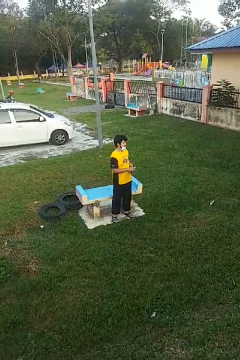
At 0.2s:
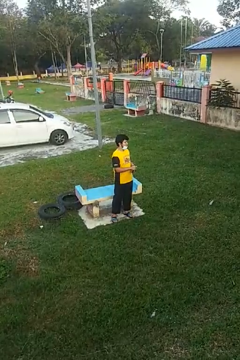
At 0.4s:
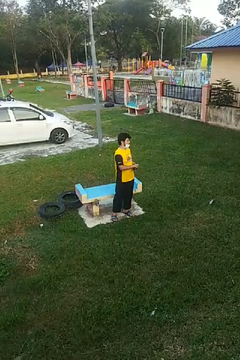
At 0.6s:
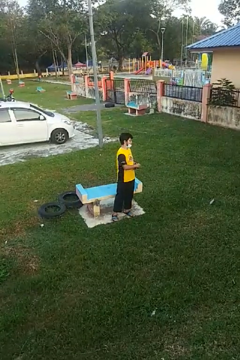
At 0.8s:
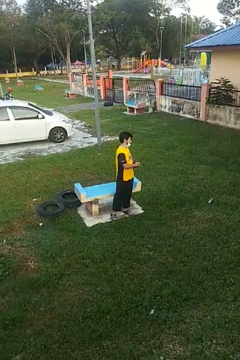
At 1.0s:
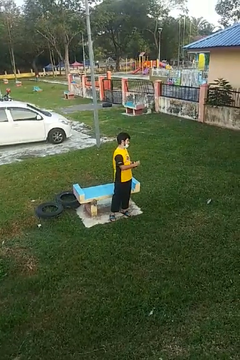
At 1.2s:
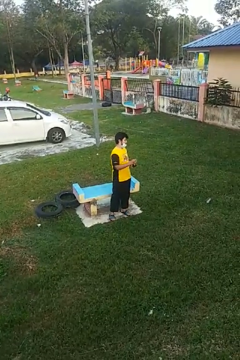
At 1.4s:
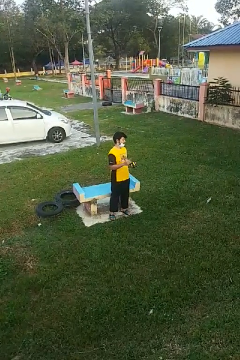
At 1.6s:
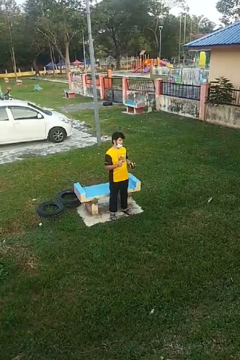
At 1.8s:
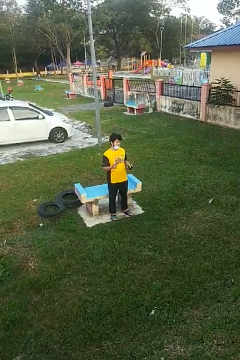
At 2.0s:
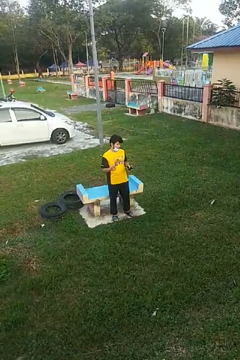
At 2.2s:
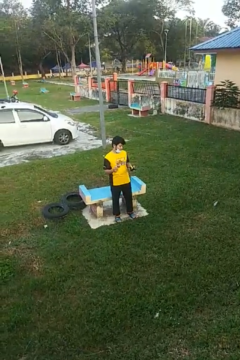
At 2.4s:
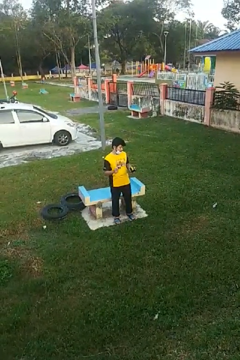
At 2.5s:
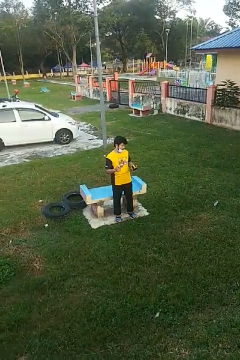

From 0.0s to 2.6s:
person takes object from purse

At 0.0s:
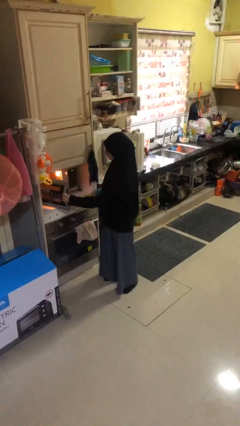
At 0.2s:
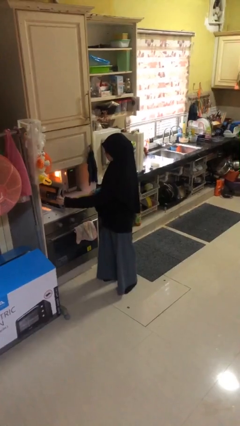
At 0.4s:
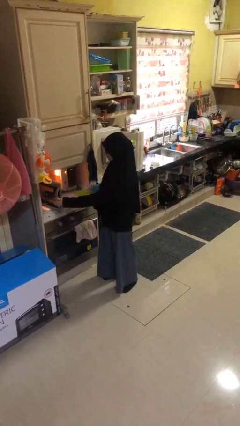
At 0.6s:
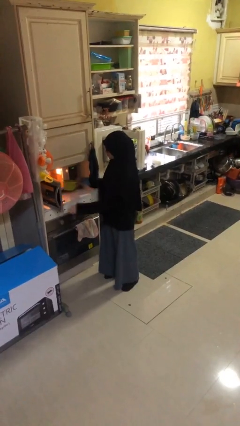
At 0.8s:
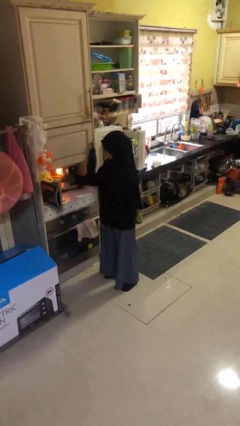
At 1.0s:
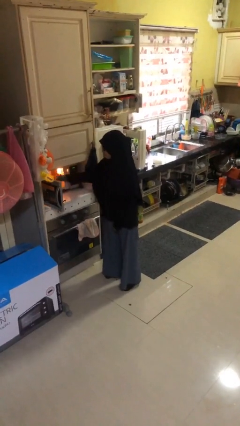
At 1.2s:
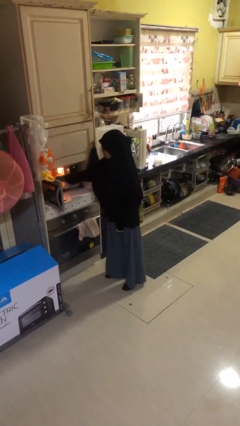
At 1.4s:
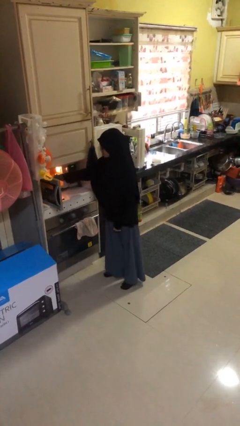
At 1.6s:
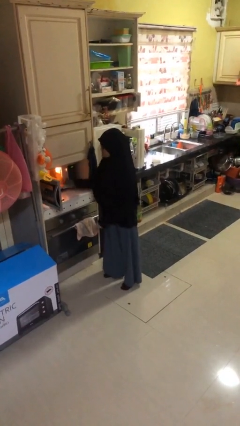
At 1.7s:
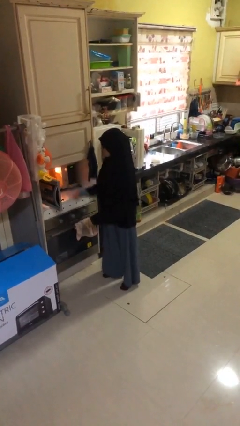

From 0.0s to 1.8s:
person puts object into microwave

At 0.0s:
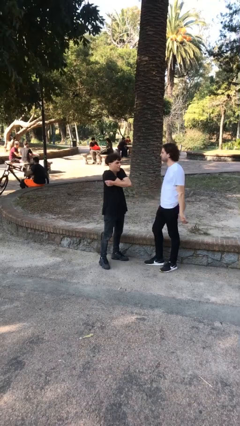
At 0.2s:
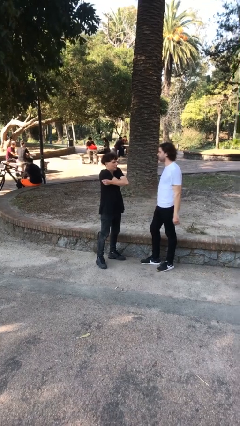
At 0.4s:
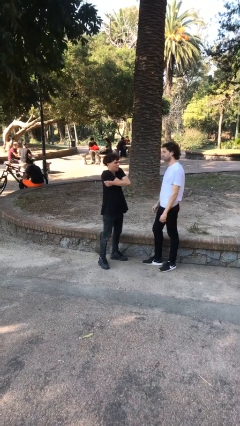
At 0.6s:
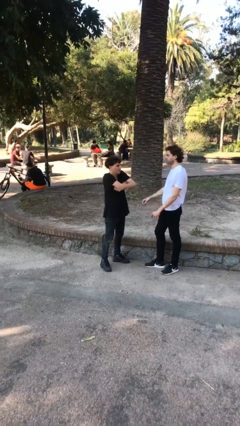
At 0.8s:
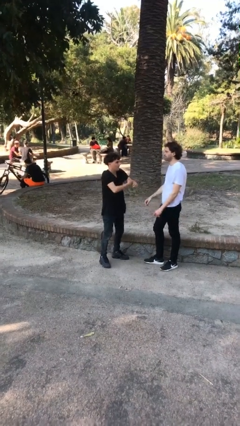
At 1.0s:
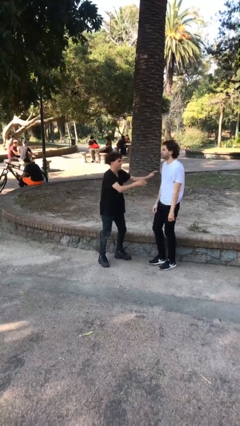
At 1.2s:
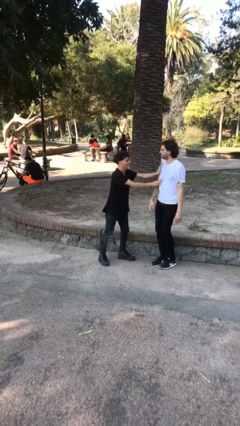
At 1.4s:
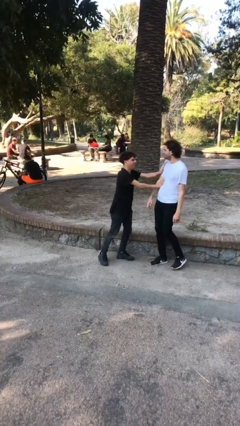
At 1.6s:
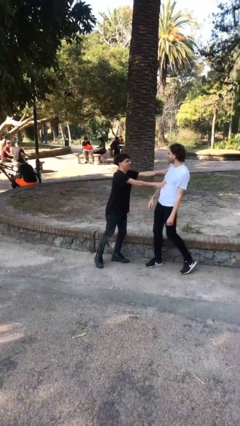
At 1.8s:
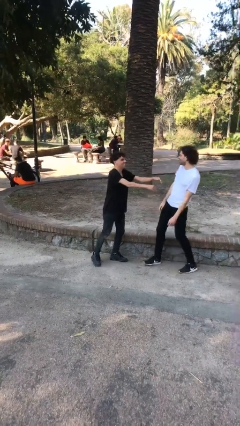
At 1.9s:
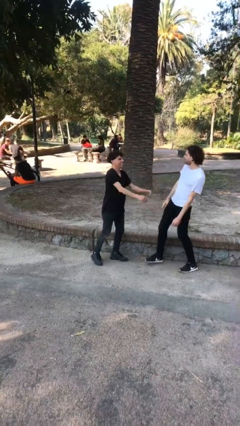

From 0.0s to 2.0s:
person shoves person

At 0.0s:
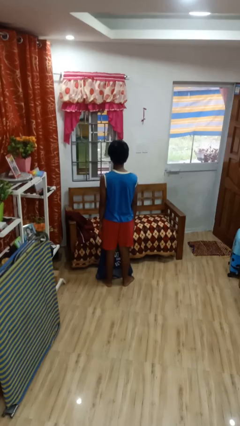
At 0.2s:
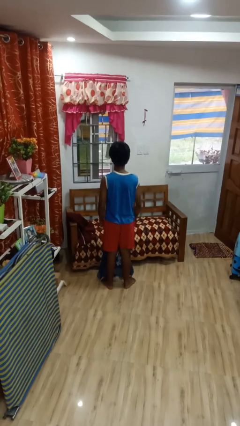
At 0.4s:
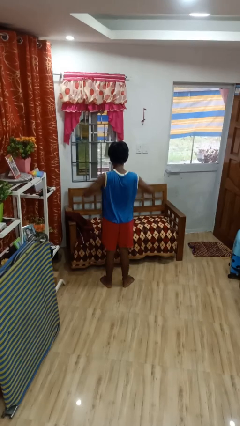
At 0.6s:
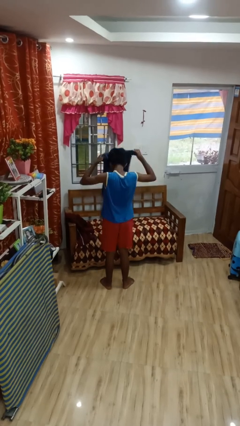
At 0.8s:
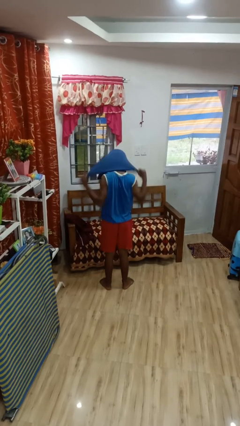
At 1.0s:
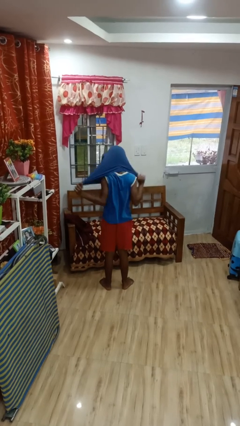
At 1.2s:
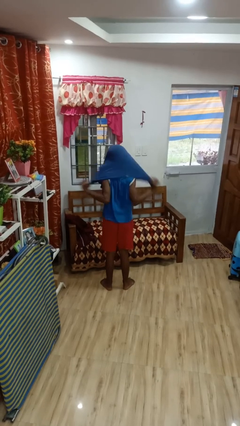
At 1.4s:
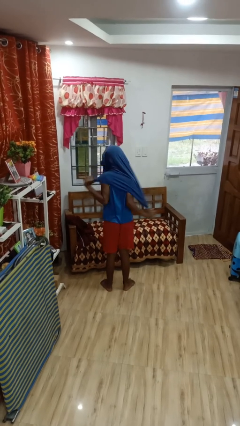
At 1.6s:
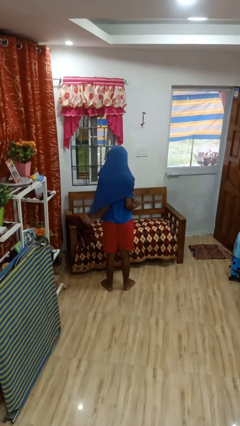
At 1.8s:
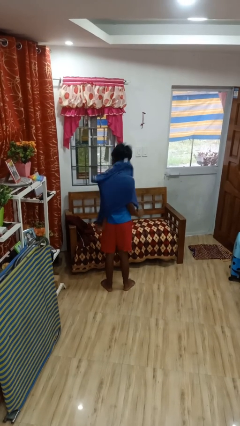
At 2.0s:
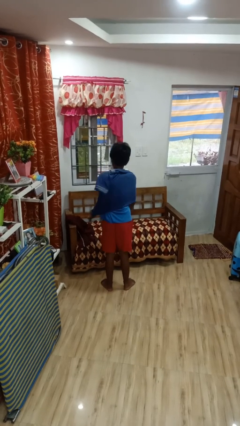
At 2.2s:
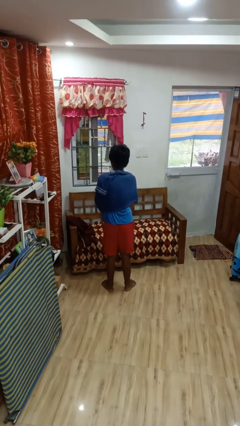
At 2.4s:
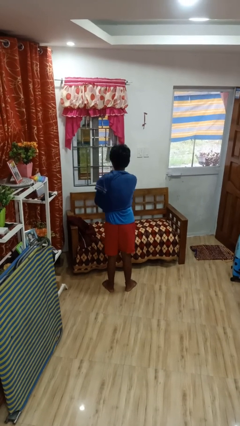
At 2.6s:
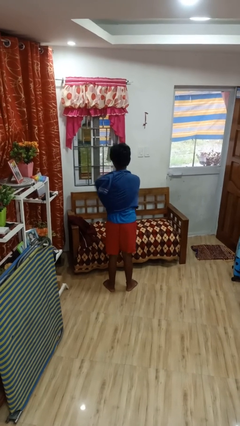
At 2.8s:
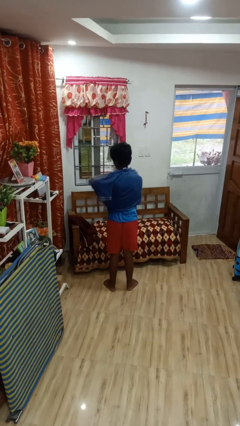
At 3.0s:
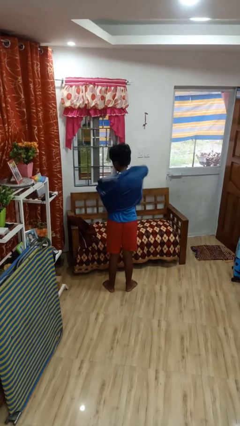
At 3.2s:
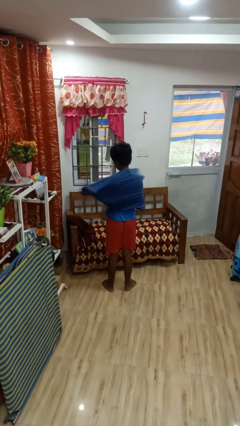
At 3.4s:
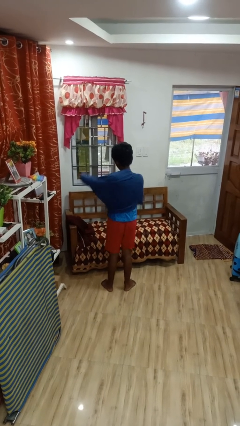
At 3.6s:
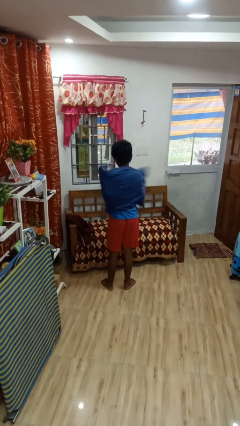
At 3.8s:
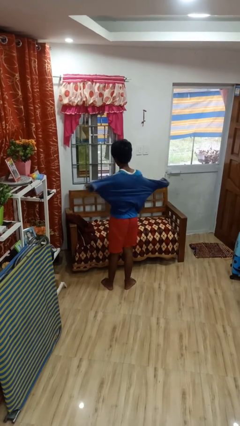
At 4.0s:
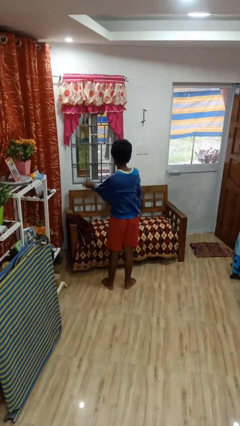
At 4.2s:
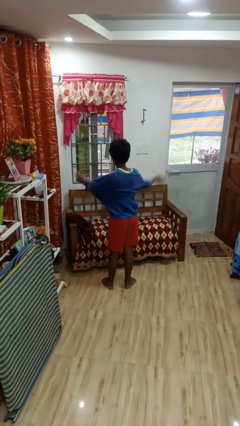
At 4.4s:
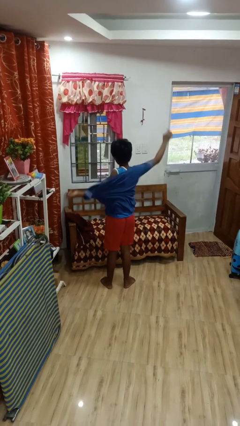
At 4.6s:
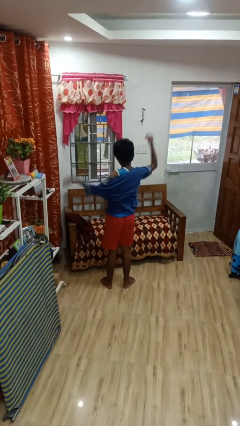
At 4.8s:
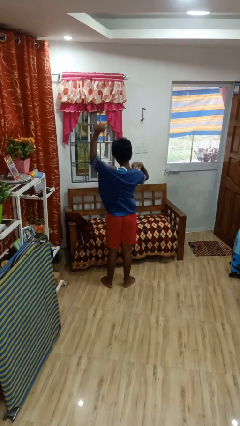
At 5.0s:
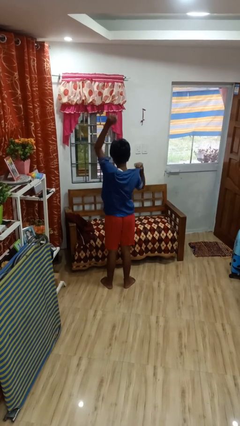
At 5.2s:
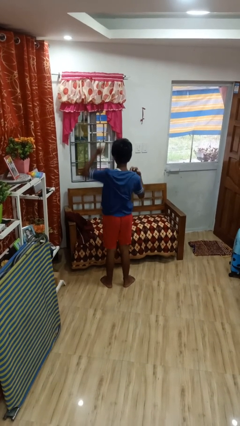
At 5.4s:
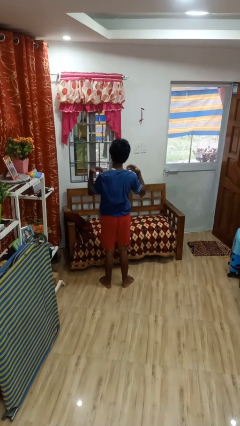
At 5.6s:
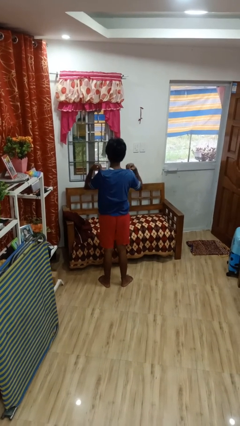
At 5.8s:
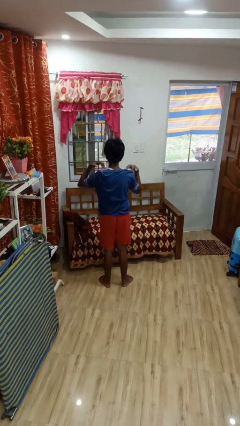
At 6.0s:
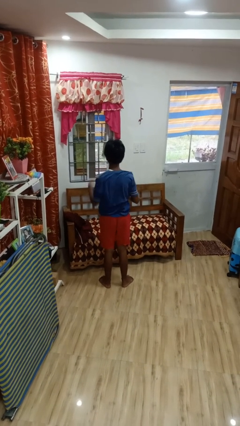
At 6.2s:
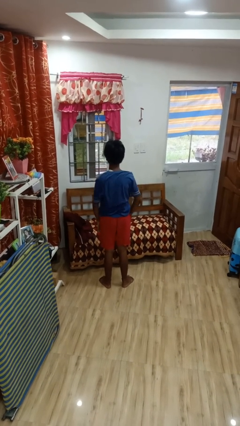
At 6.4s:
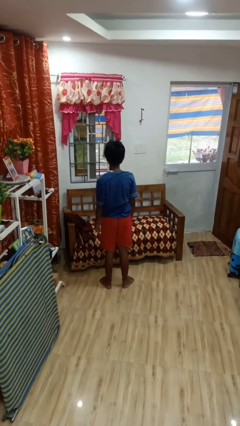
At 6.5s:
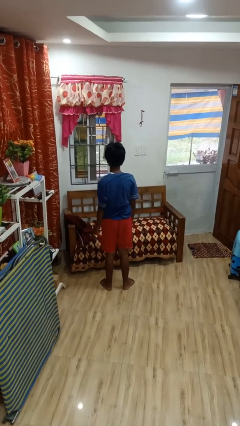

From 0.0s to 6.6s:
person puts on shirt

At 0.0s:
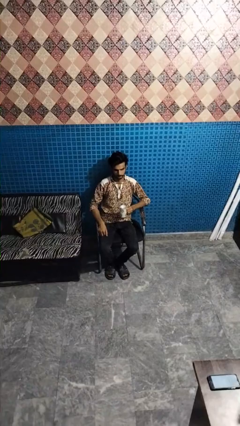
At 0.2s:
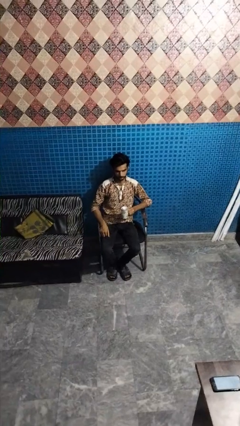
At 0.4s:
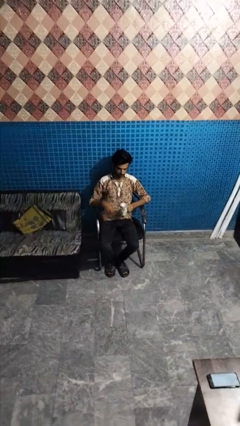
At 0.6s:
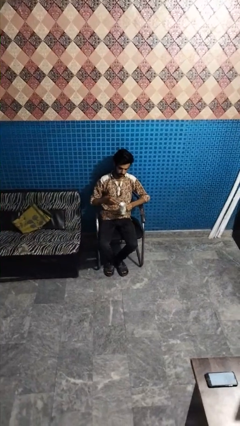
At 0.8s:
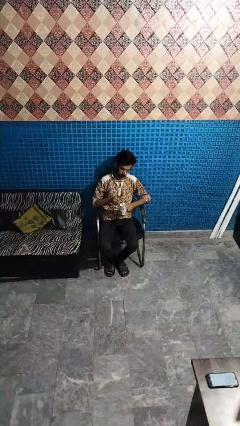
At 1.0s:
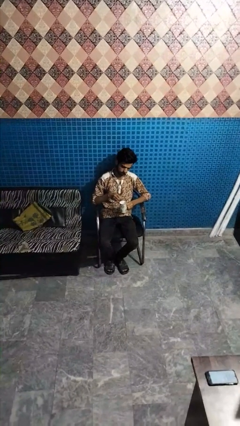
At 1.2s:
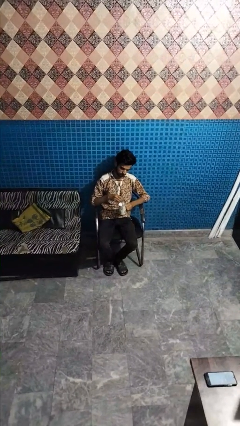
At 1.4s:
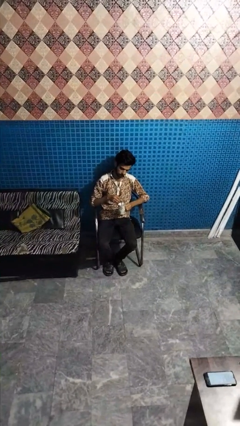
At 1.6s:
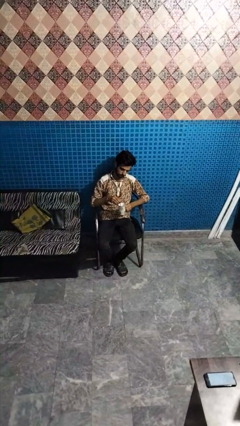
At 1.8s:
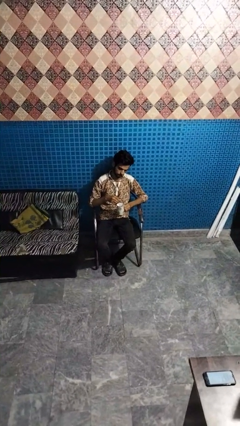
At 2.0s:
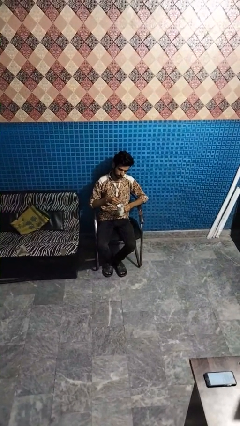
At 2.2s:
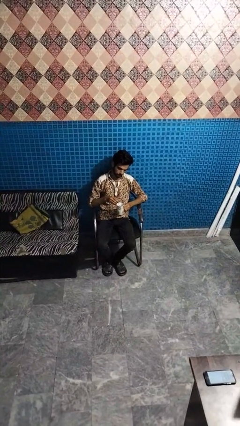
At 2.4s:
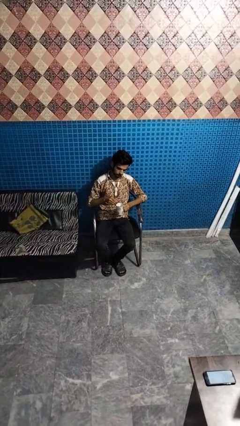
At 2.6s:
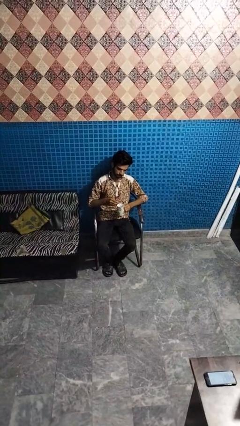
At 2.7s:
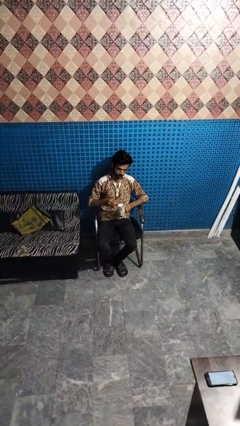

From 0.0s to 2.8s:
person stirs mug

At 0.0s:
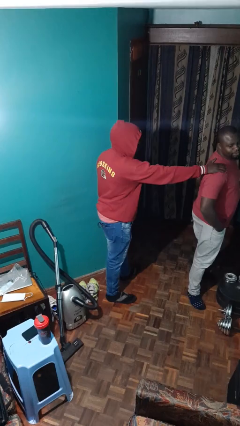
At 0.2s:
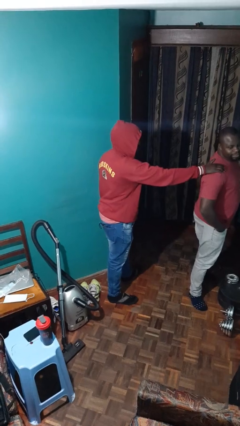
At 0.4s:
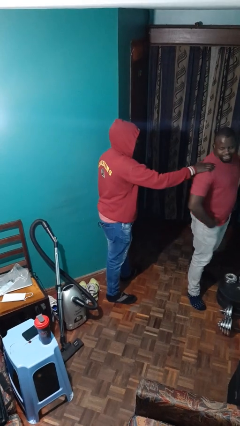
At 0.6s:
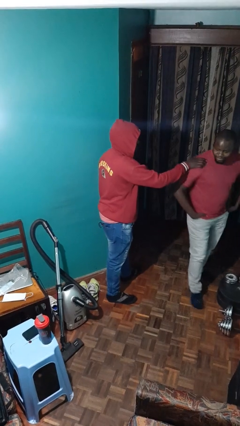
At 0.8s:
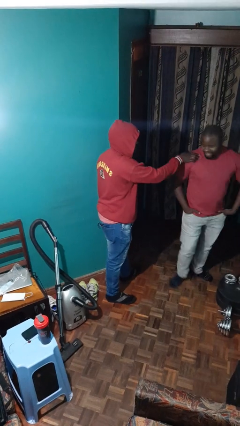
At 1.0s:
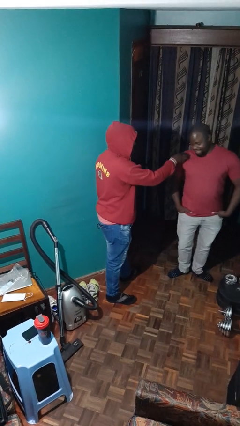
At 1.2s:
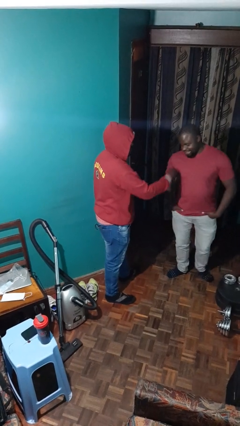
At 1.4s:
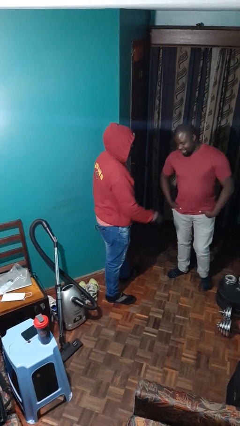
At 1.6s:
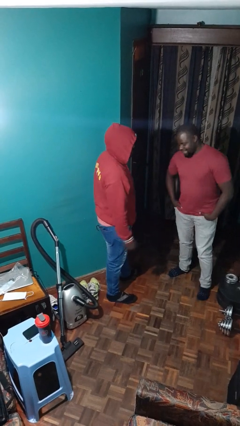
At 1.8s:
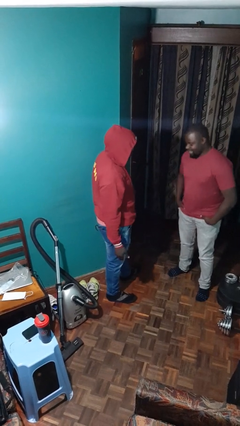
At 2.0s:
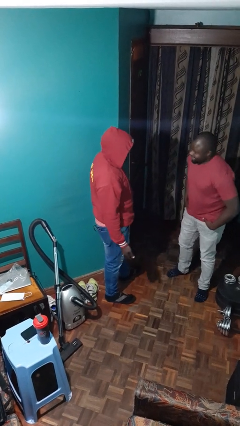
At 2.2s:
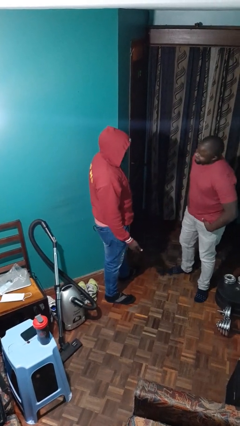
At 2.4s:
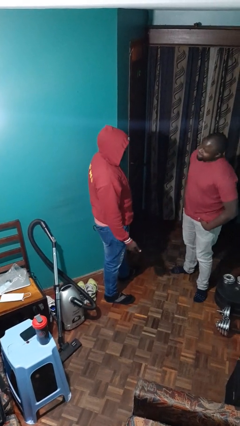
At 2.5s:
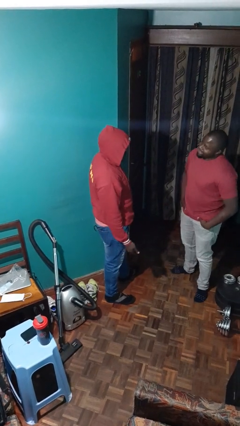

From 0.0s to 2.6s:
person spins person around
